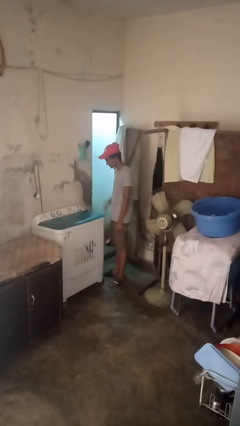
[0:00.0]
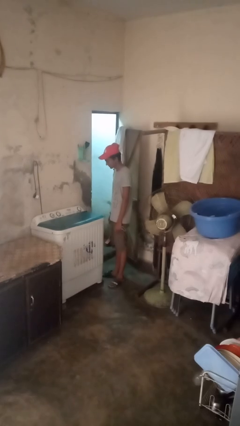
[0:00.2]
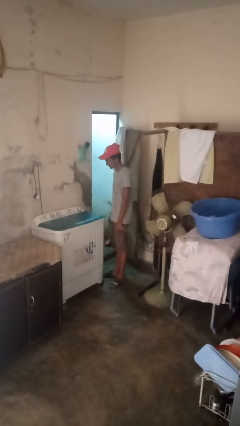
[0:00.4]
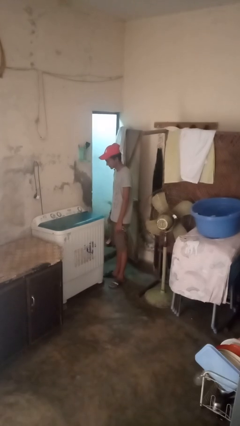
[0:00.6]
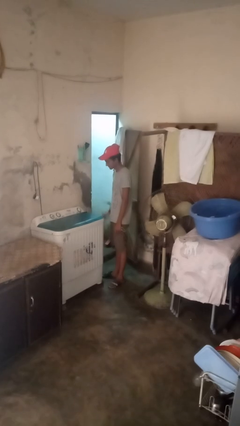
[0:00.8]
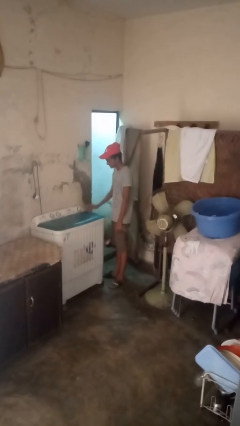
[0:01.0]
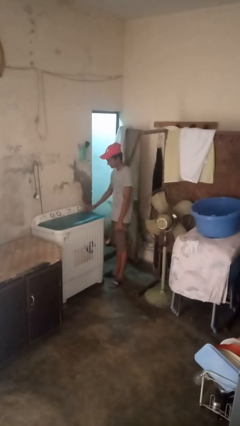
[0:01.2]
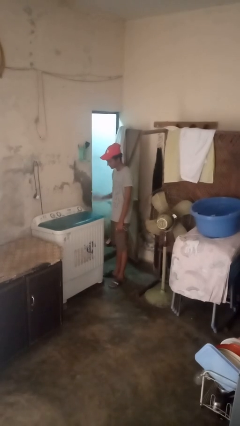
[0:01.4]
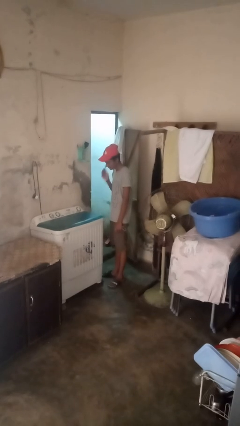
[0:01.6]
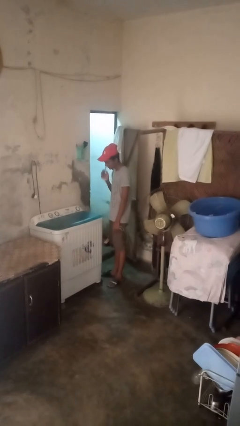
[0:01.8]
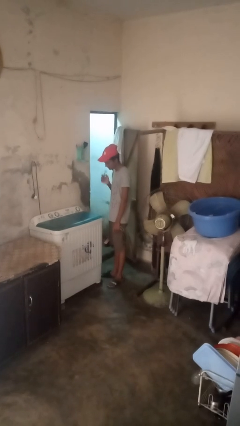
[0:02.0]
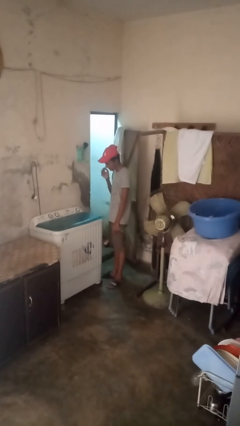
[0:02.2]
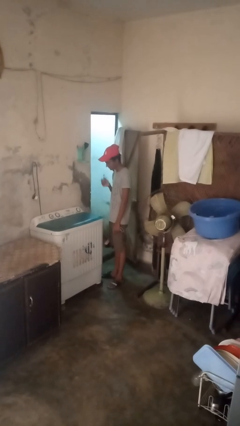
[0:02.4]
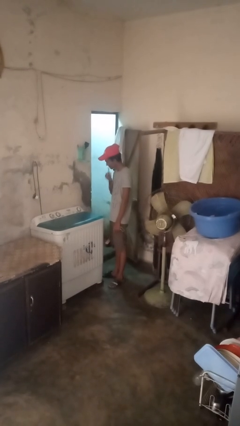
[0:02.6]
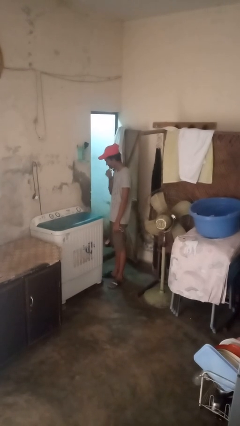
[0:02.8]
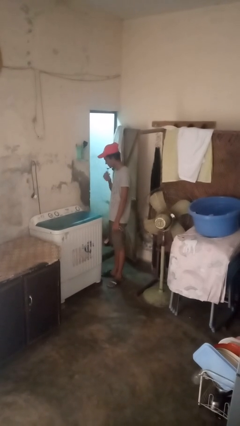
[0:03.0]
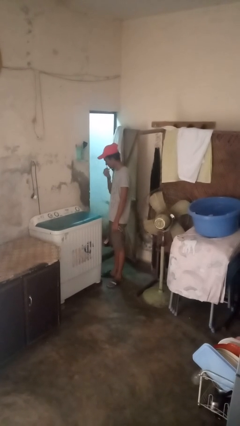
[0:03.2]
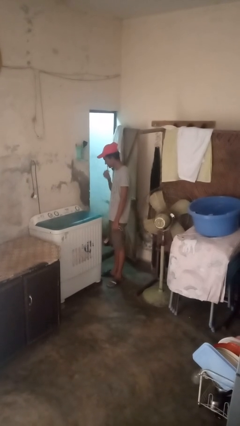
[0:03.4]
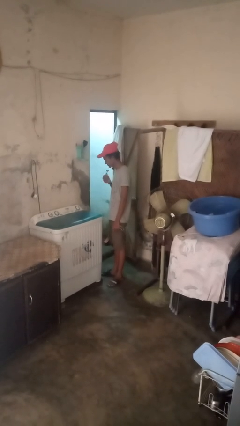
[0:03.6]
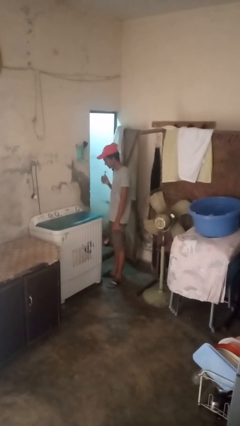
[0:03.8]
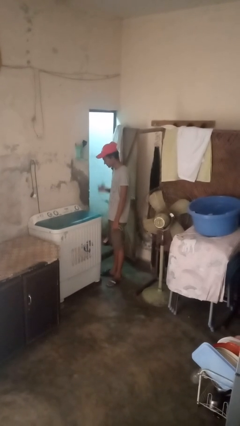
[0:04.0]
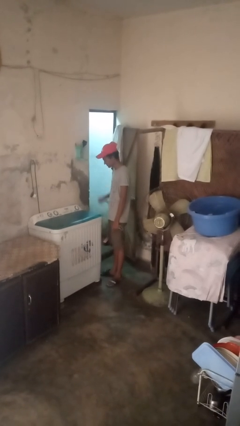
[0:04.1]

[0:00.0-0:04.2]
person shaves face

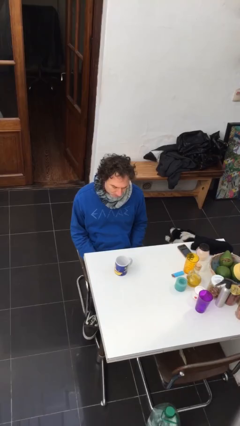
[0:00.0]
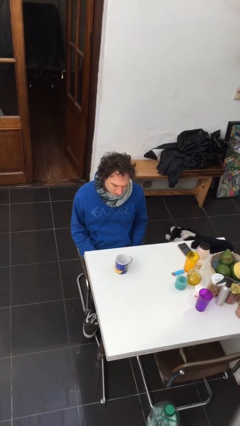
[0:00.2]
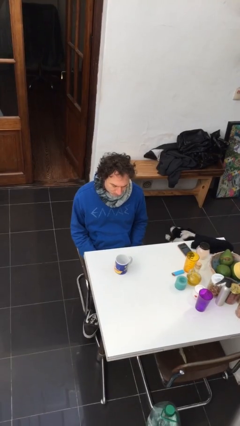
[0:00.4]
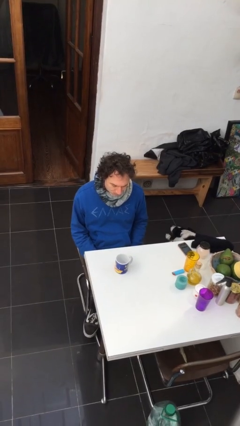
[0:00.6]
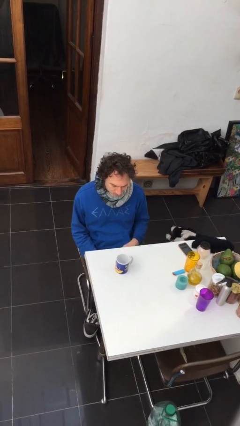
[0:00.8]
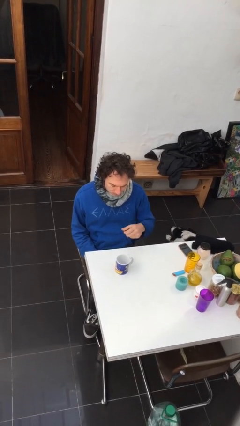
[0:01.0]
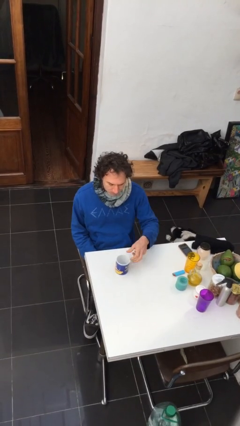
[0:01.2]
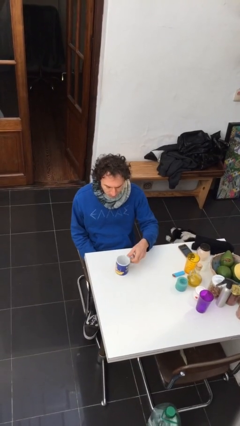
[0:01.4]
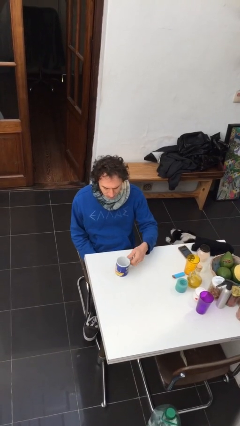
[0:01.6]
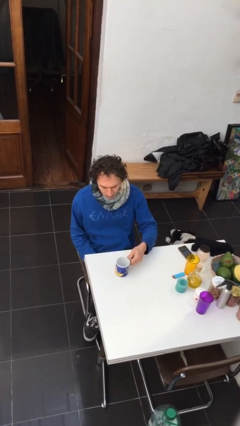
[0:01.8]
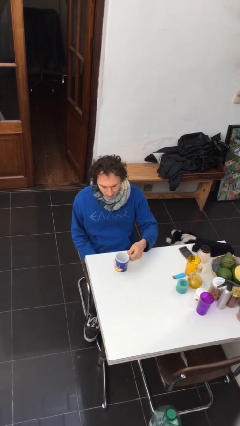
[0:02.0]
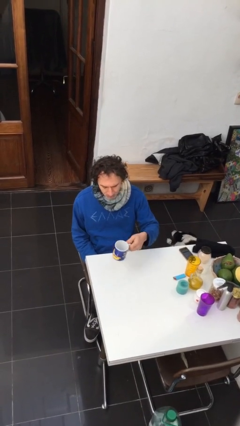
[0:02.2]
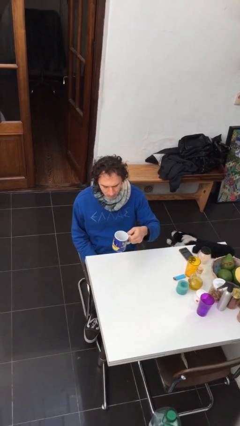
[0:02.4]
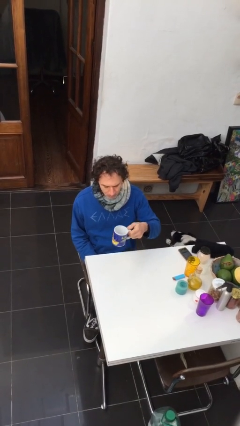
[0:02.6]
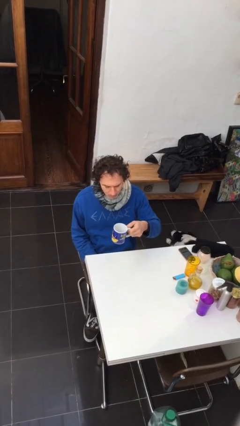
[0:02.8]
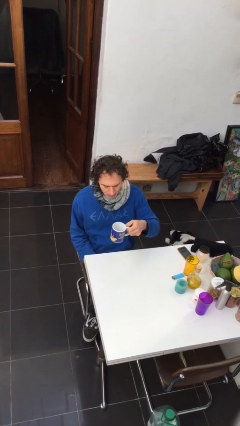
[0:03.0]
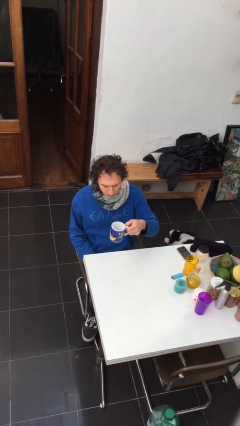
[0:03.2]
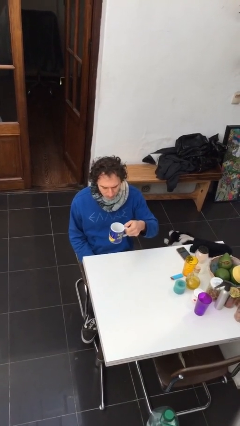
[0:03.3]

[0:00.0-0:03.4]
person picks up object from table

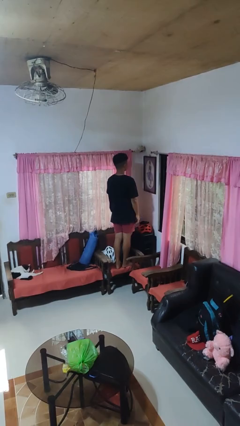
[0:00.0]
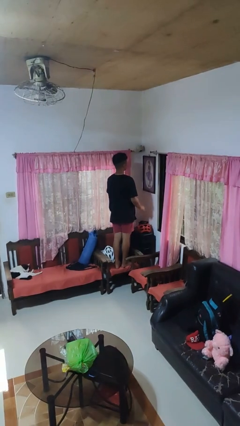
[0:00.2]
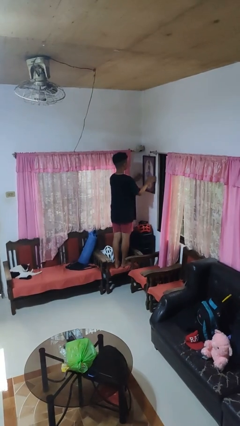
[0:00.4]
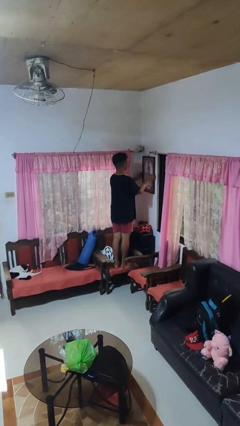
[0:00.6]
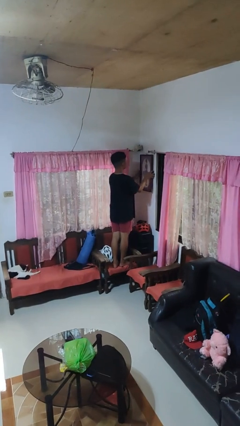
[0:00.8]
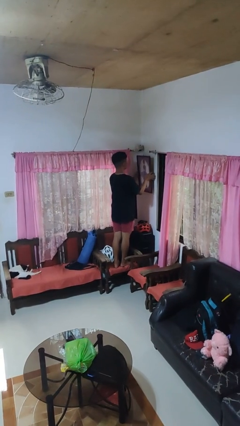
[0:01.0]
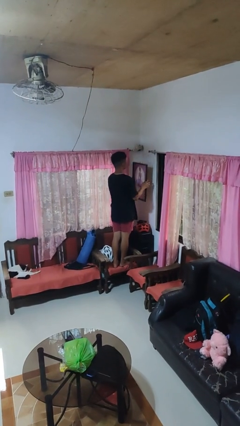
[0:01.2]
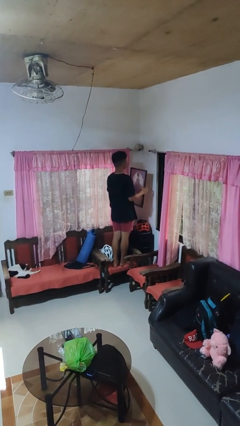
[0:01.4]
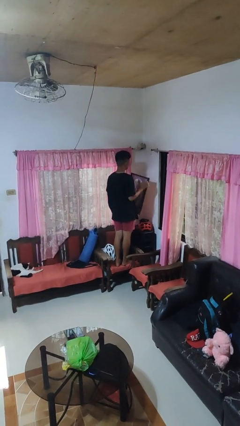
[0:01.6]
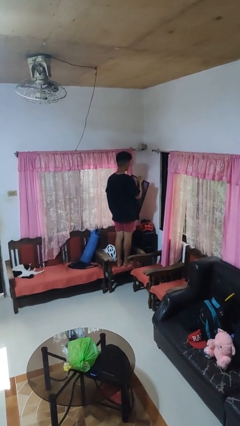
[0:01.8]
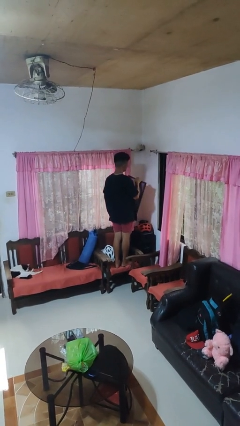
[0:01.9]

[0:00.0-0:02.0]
person takes down picture frame

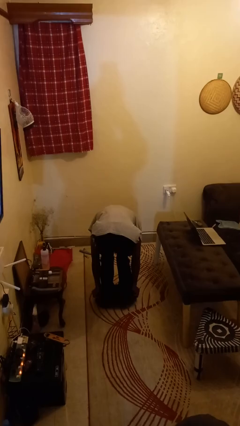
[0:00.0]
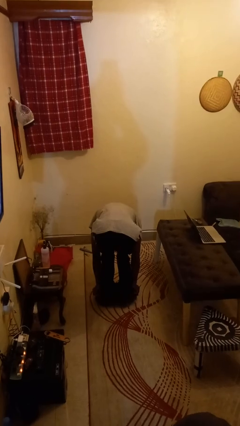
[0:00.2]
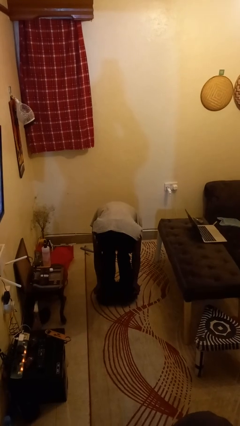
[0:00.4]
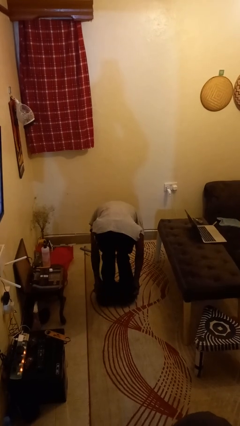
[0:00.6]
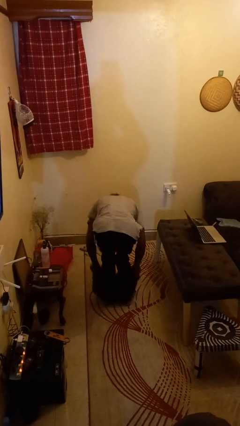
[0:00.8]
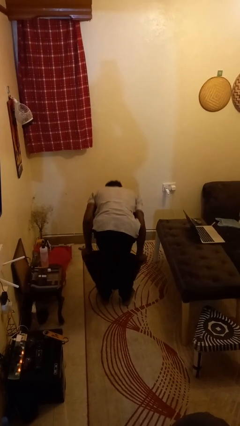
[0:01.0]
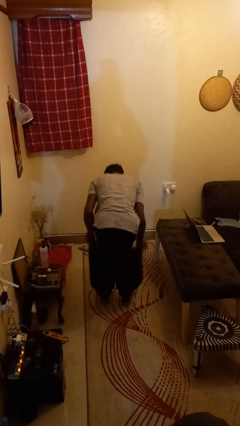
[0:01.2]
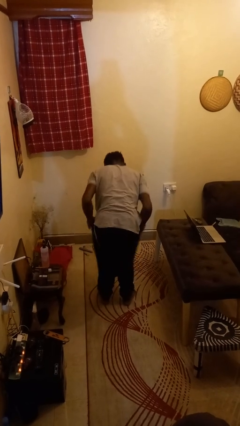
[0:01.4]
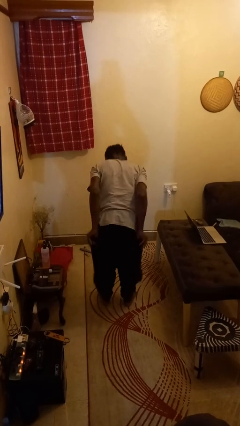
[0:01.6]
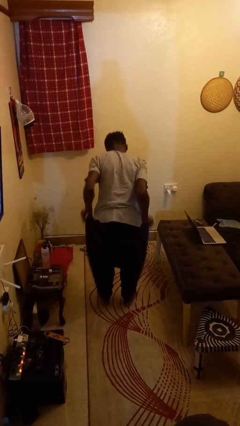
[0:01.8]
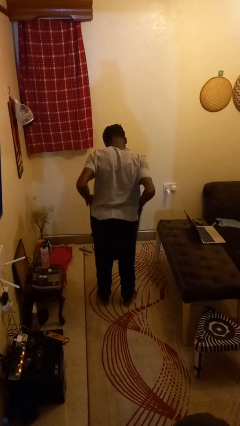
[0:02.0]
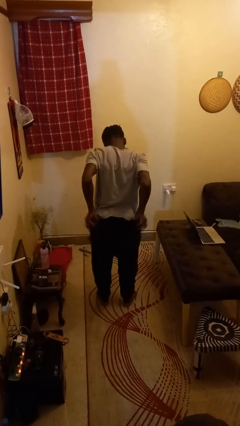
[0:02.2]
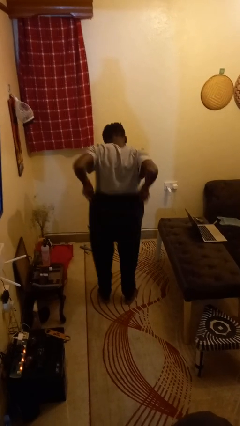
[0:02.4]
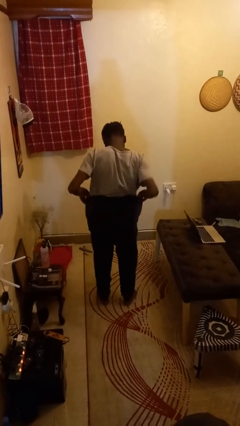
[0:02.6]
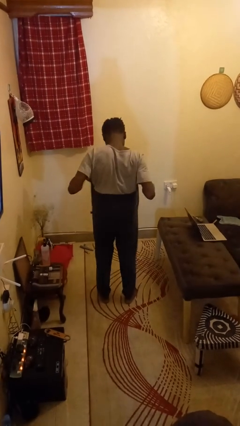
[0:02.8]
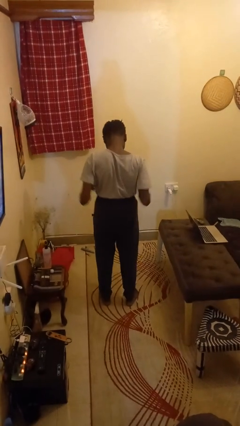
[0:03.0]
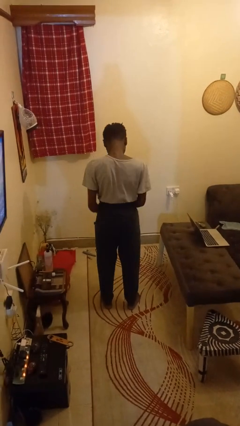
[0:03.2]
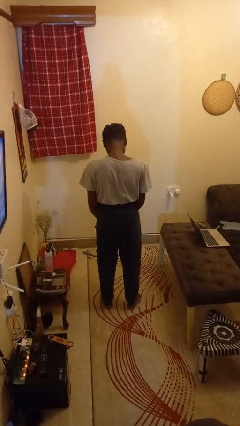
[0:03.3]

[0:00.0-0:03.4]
person puts on pants

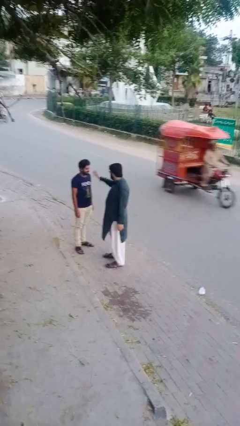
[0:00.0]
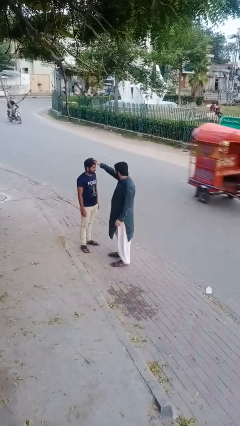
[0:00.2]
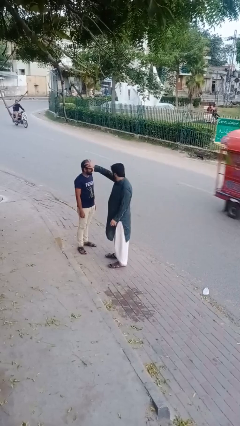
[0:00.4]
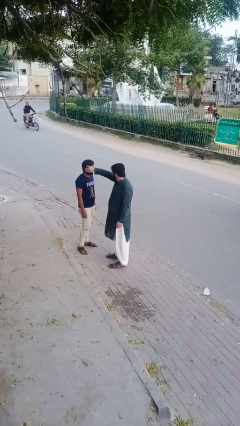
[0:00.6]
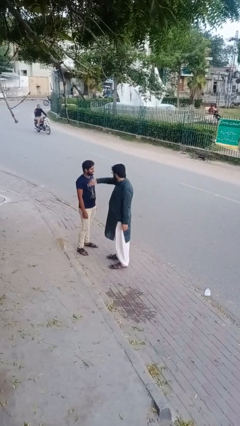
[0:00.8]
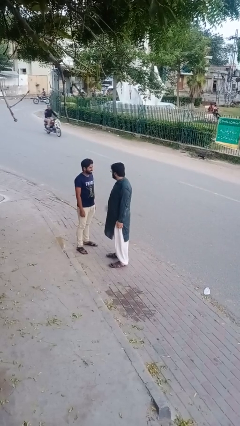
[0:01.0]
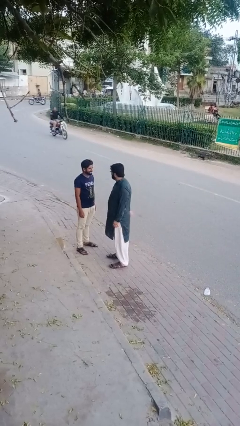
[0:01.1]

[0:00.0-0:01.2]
person grabs person by hair

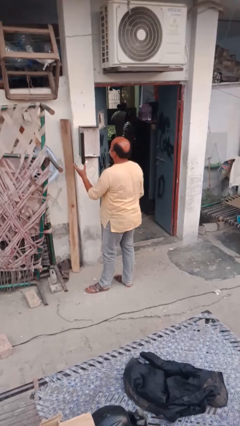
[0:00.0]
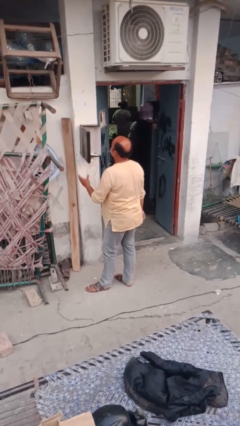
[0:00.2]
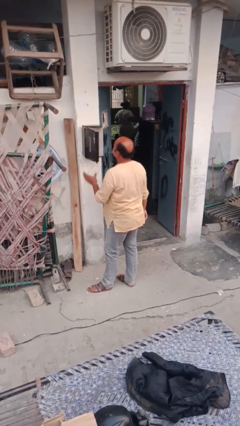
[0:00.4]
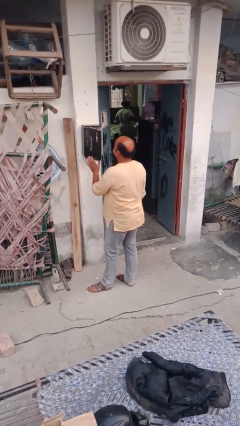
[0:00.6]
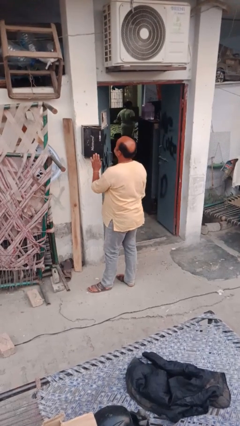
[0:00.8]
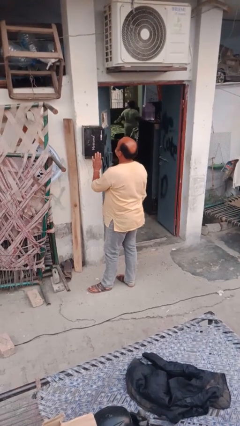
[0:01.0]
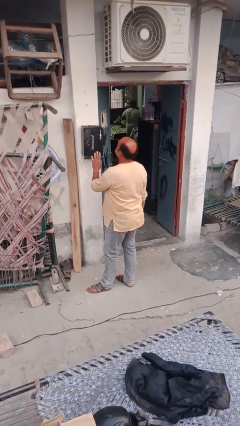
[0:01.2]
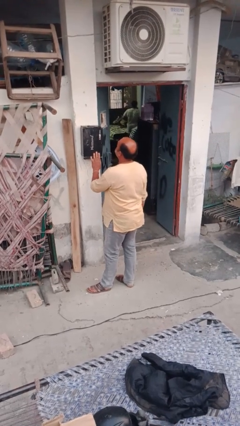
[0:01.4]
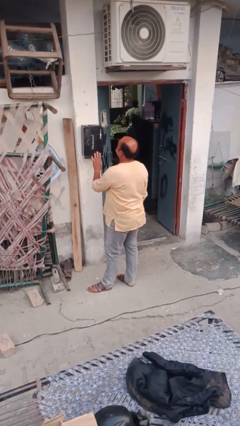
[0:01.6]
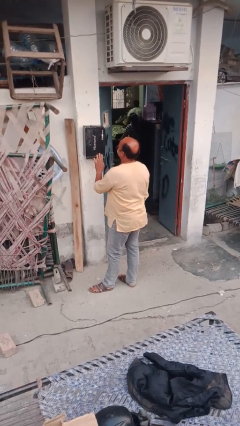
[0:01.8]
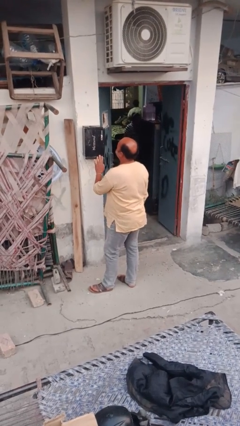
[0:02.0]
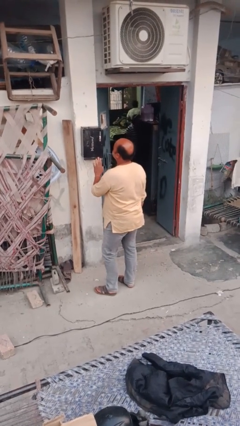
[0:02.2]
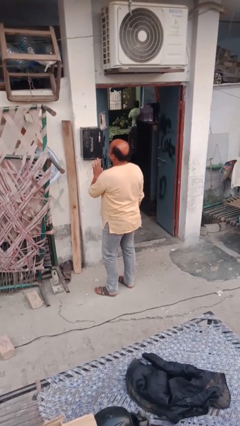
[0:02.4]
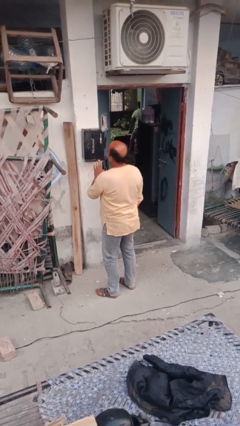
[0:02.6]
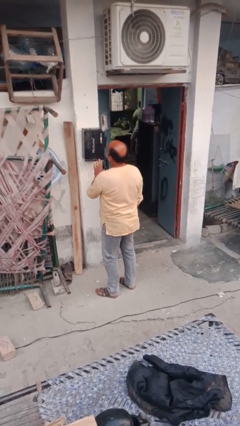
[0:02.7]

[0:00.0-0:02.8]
person closes mailbox

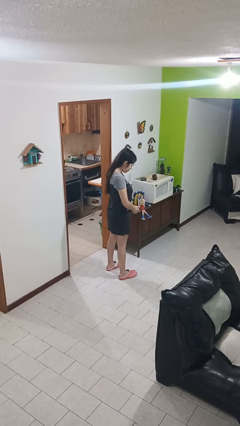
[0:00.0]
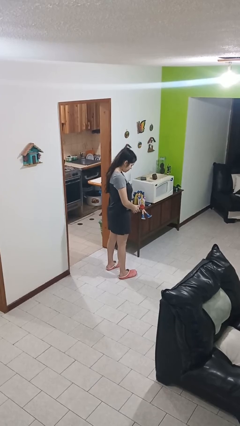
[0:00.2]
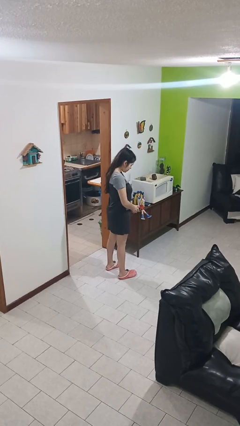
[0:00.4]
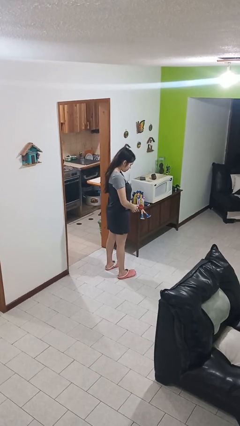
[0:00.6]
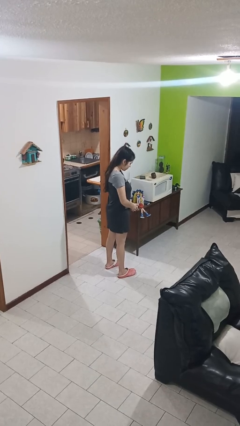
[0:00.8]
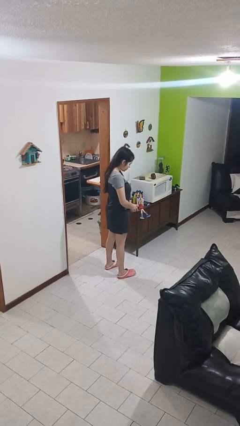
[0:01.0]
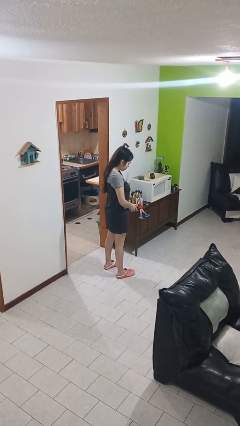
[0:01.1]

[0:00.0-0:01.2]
person prays
